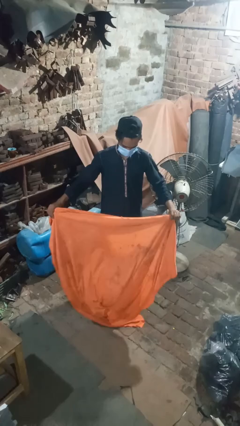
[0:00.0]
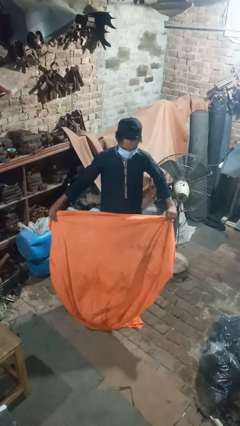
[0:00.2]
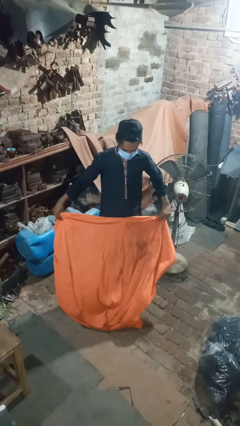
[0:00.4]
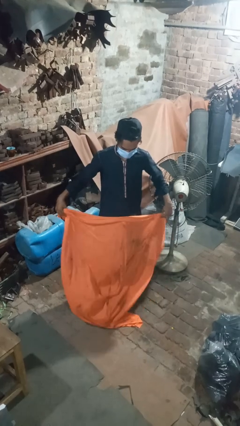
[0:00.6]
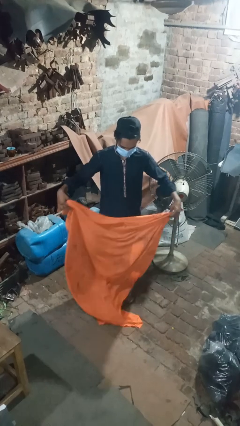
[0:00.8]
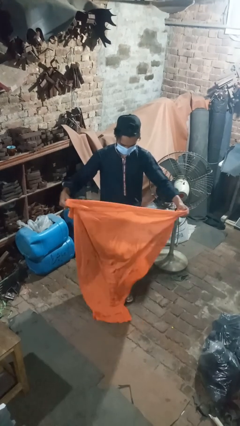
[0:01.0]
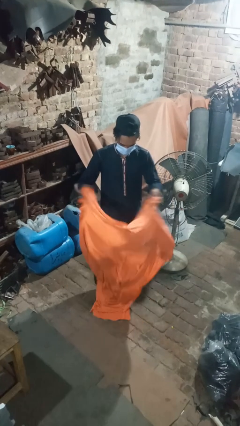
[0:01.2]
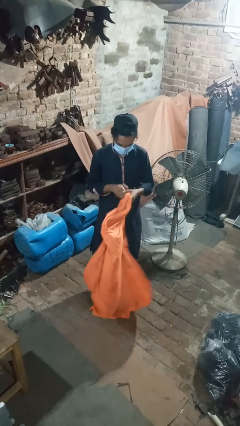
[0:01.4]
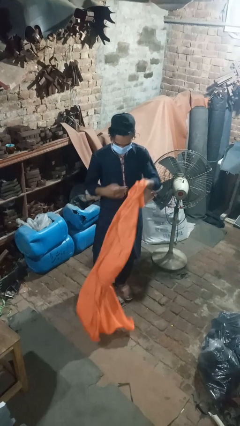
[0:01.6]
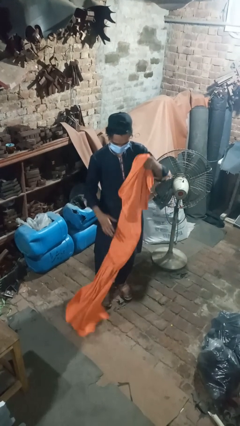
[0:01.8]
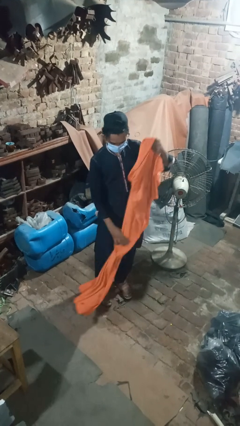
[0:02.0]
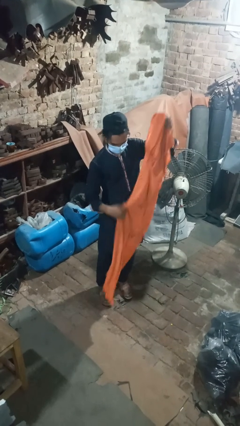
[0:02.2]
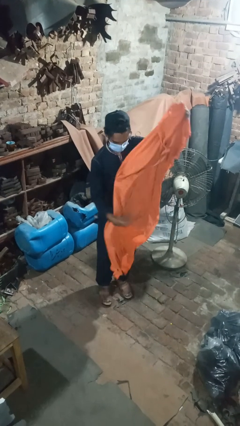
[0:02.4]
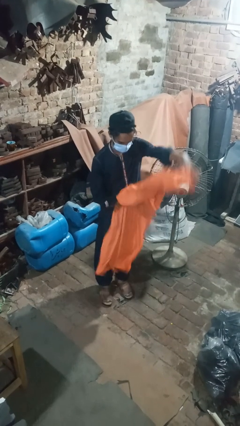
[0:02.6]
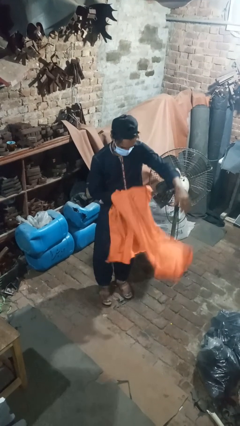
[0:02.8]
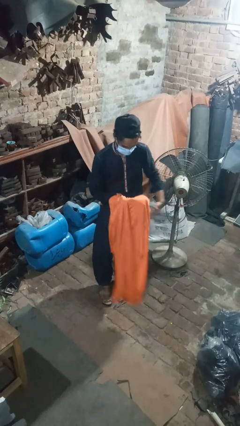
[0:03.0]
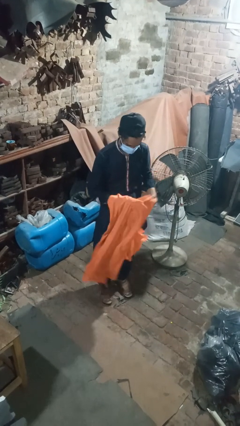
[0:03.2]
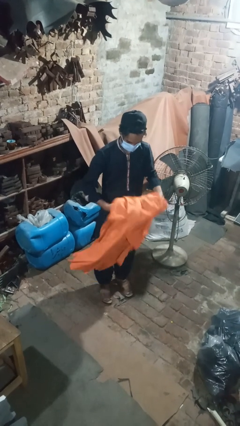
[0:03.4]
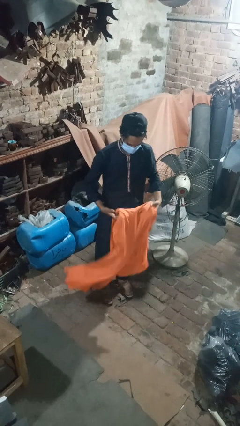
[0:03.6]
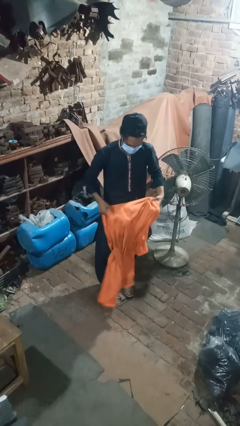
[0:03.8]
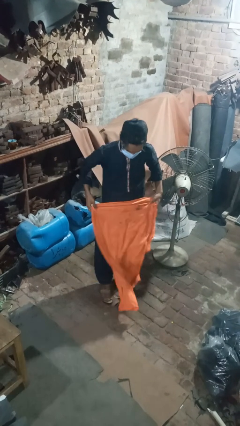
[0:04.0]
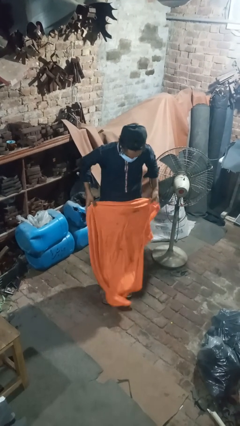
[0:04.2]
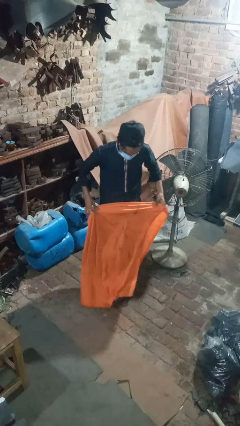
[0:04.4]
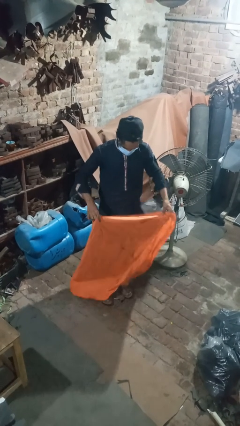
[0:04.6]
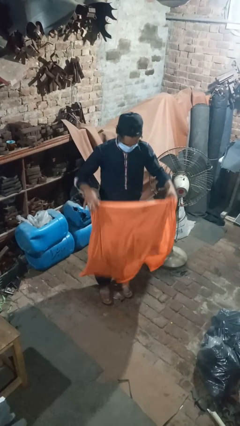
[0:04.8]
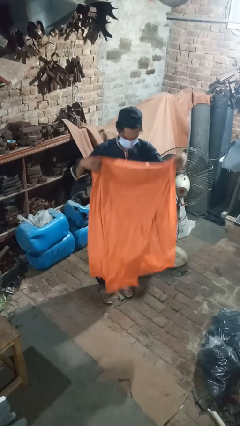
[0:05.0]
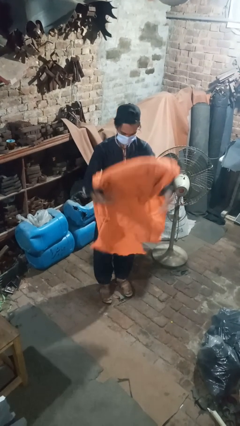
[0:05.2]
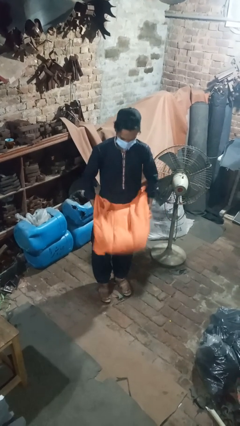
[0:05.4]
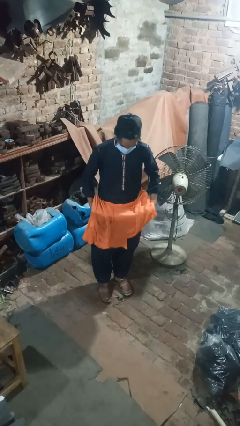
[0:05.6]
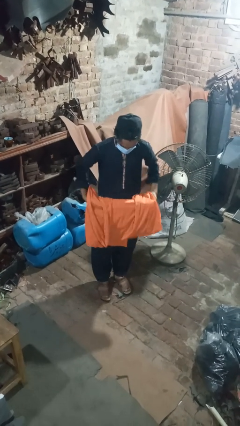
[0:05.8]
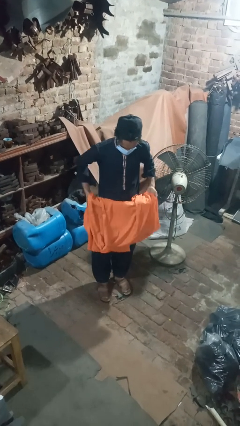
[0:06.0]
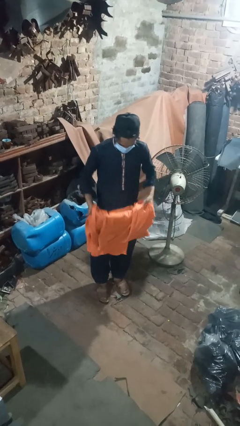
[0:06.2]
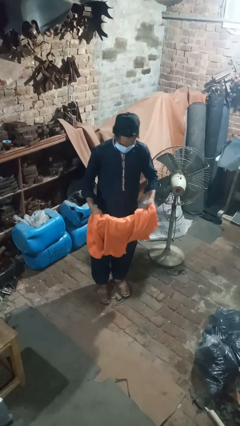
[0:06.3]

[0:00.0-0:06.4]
person folds blanket

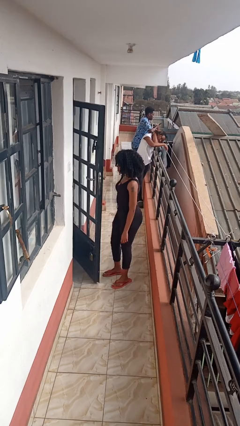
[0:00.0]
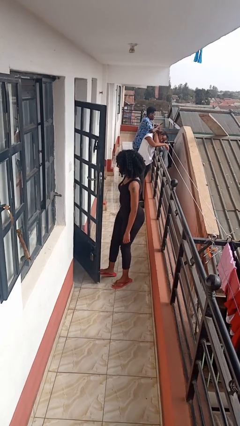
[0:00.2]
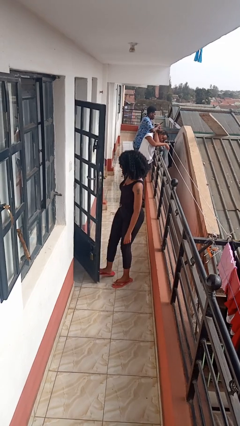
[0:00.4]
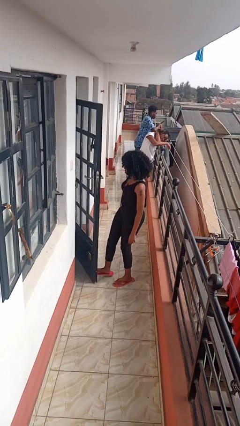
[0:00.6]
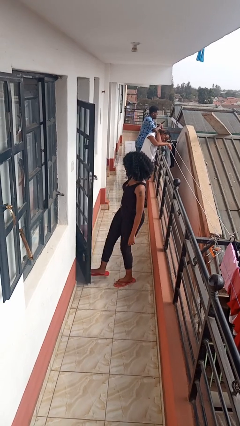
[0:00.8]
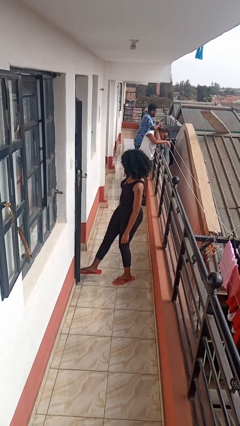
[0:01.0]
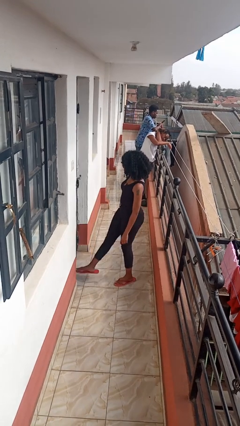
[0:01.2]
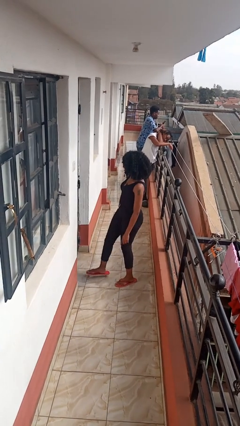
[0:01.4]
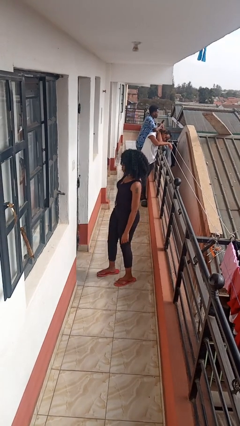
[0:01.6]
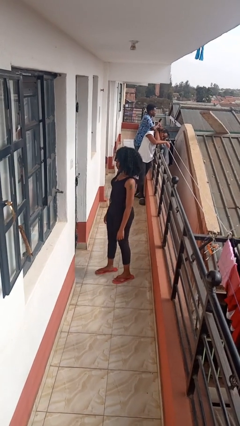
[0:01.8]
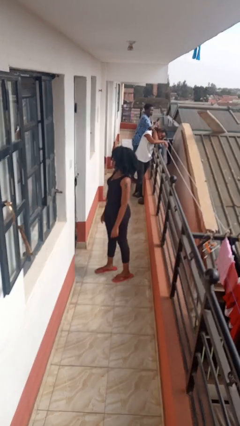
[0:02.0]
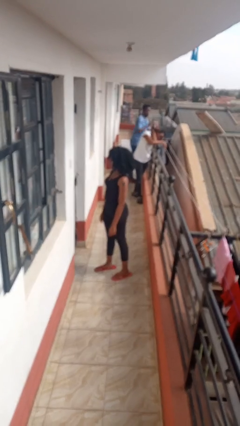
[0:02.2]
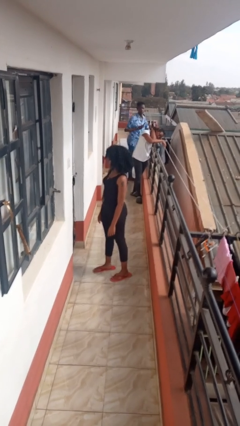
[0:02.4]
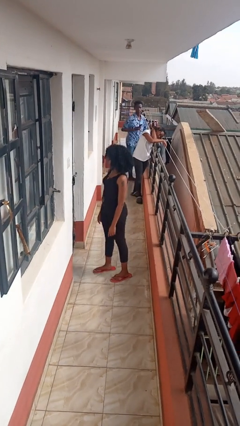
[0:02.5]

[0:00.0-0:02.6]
person closes door with foot

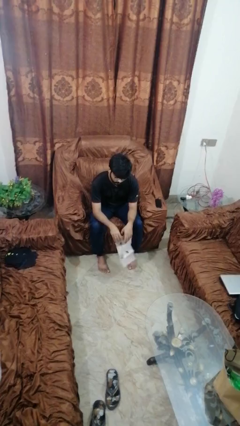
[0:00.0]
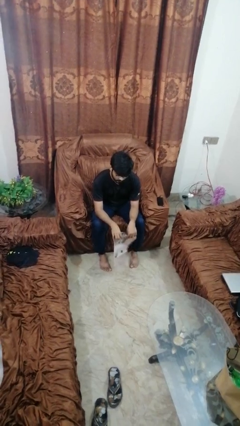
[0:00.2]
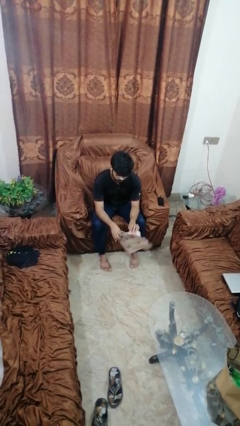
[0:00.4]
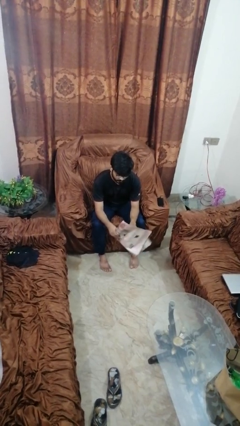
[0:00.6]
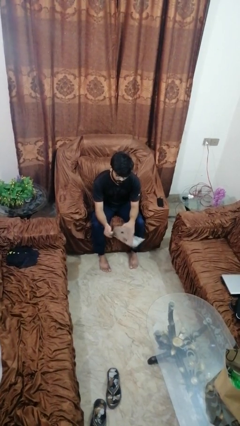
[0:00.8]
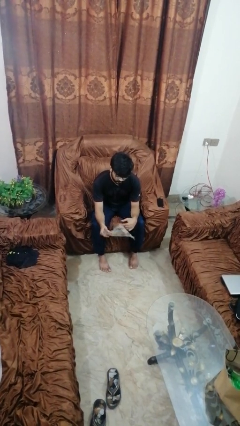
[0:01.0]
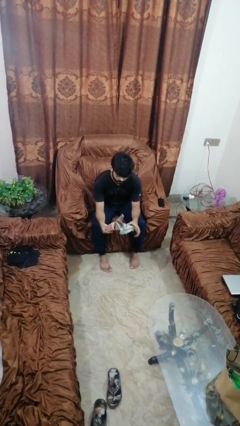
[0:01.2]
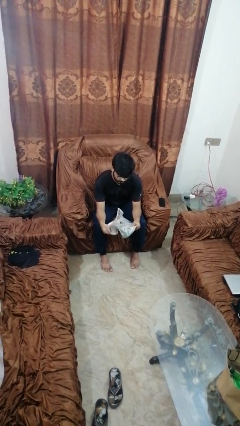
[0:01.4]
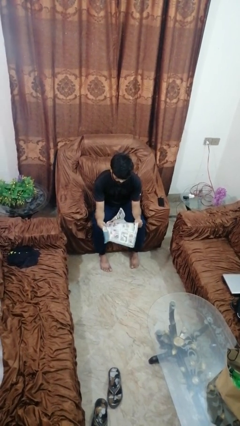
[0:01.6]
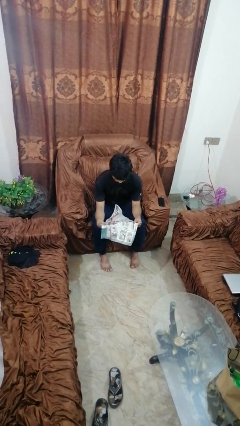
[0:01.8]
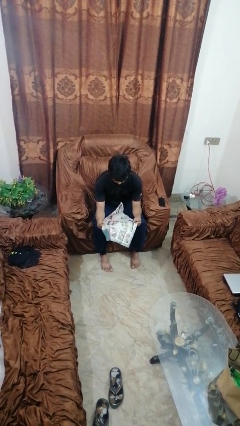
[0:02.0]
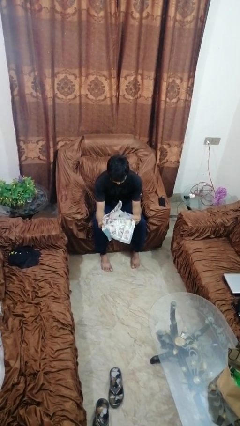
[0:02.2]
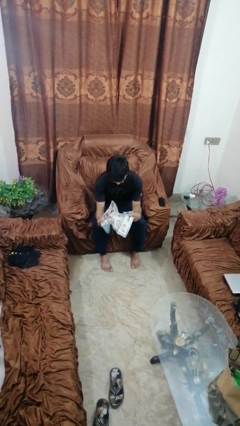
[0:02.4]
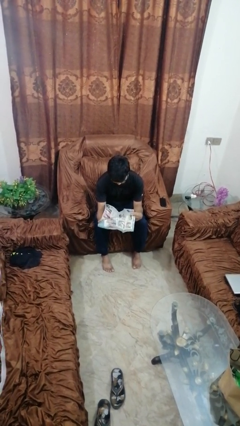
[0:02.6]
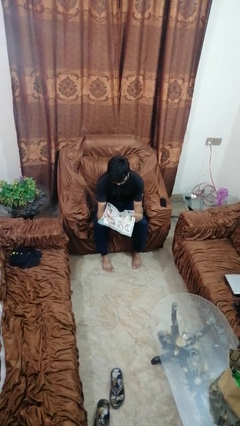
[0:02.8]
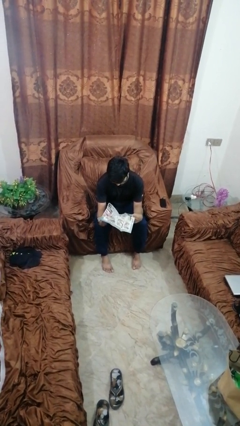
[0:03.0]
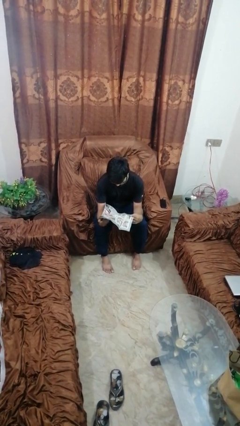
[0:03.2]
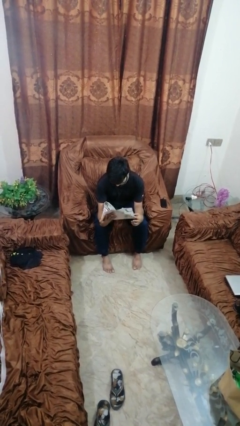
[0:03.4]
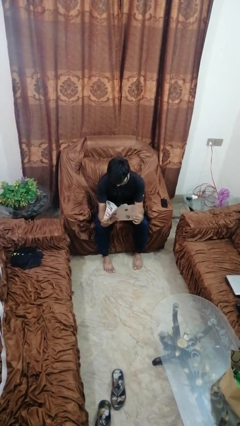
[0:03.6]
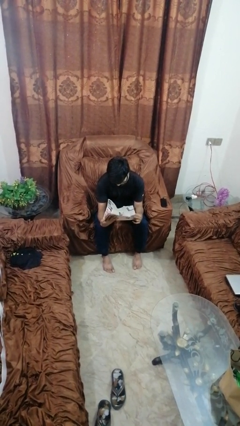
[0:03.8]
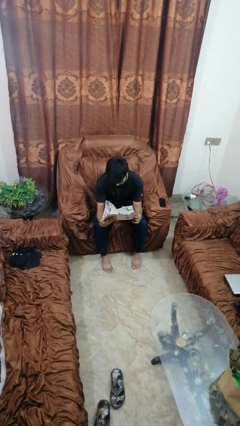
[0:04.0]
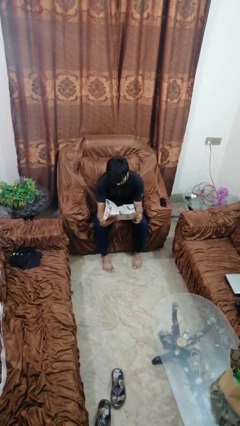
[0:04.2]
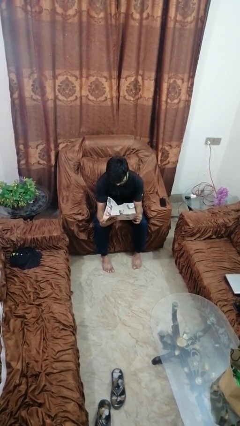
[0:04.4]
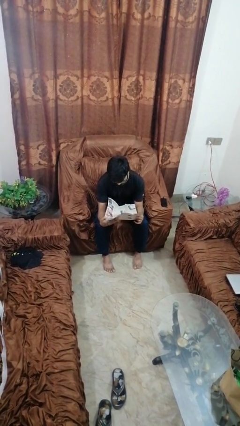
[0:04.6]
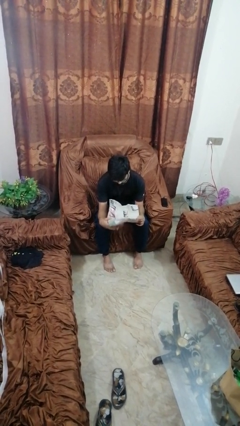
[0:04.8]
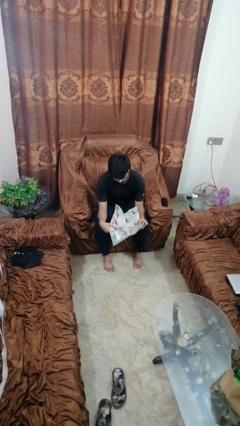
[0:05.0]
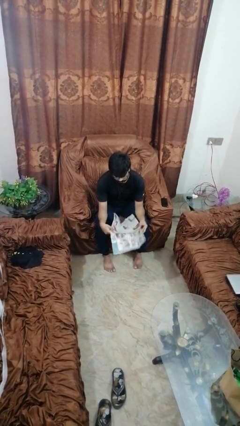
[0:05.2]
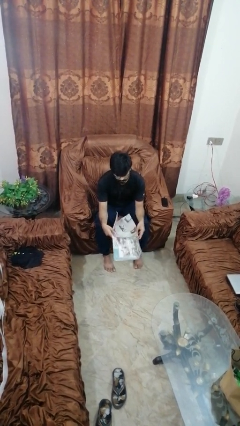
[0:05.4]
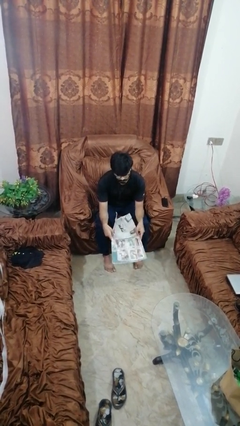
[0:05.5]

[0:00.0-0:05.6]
person reads newspaper

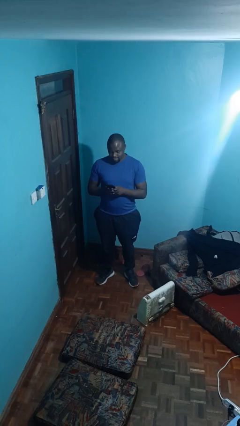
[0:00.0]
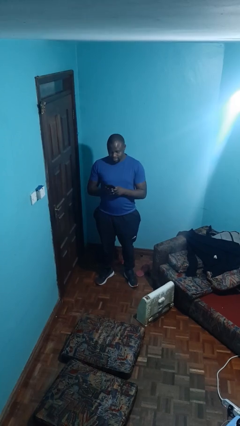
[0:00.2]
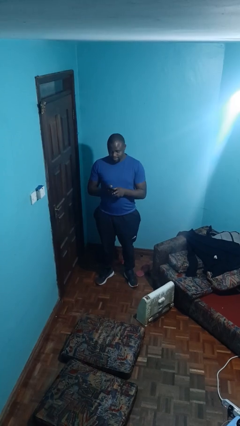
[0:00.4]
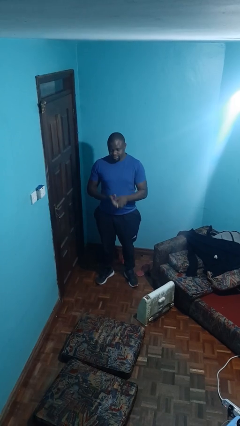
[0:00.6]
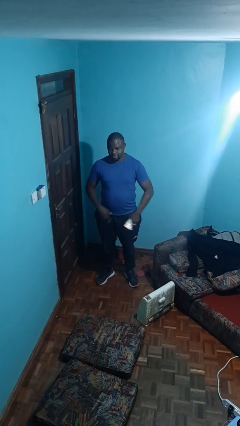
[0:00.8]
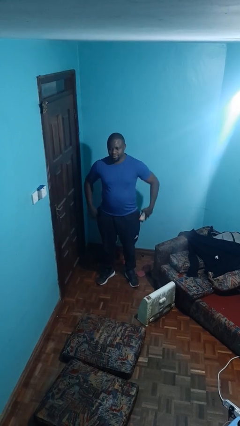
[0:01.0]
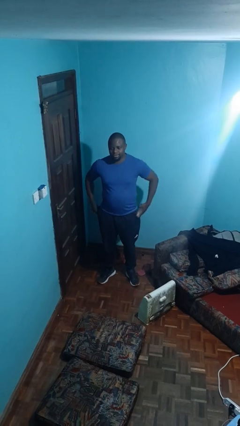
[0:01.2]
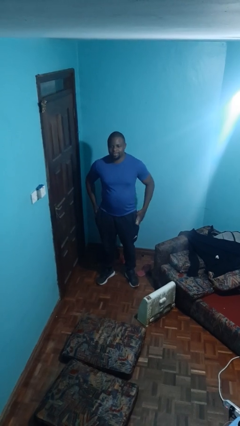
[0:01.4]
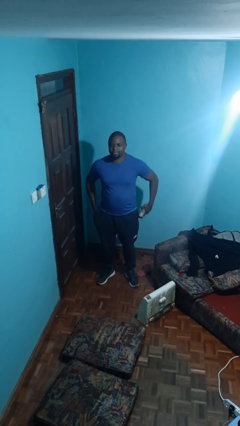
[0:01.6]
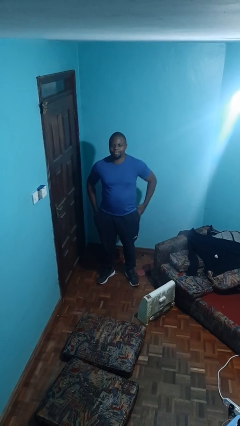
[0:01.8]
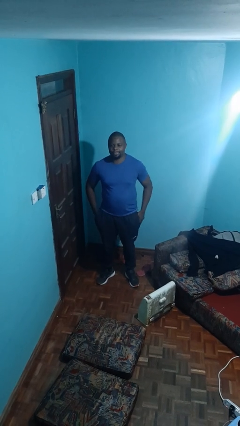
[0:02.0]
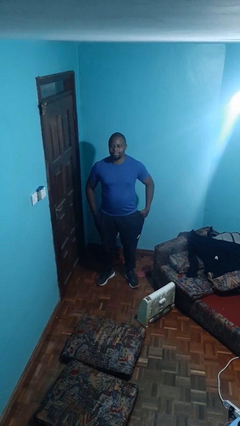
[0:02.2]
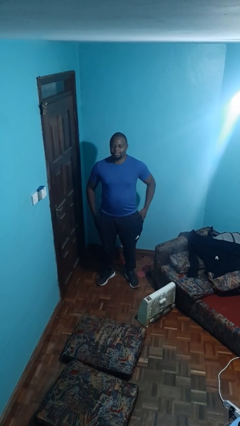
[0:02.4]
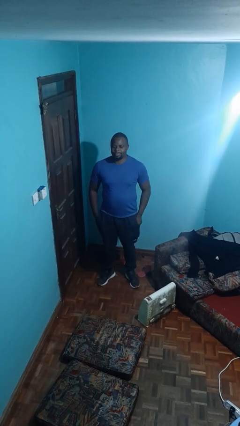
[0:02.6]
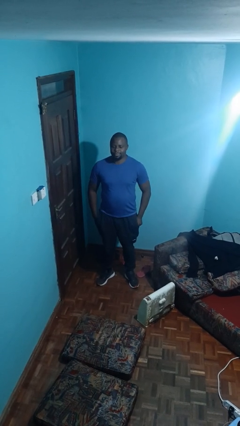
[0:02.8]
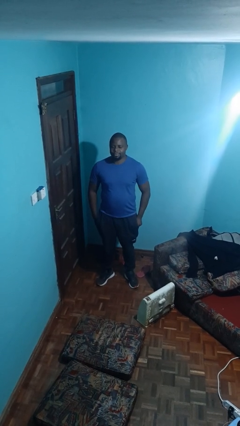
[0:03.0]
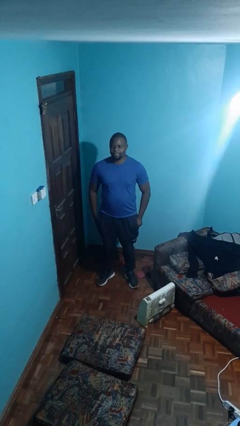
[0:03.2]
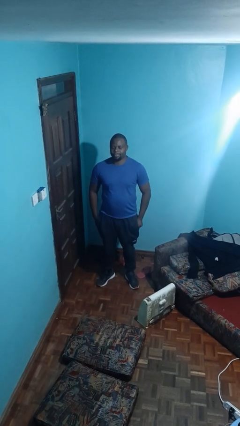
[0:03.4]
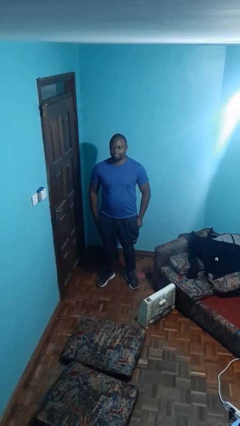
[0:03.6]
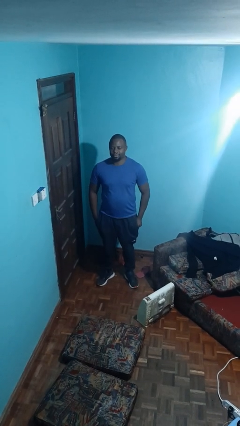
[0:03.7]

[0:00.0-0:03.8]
person puts phone into pocket
